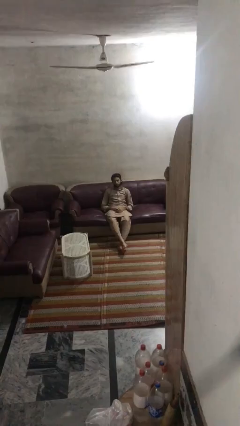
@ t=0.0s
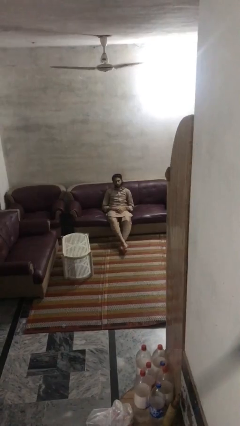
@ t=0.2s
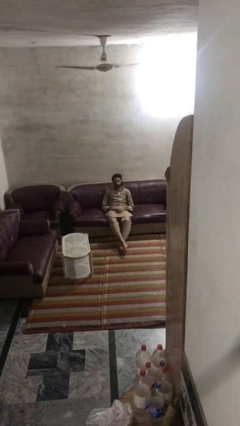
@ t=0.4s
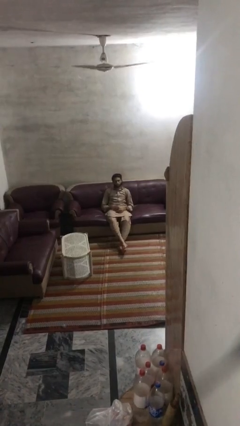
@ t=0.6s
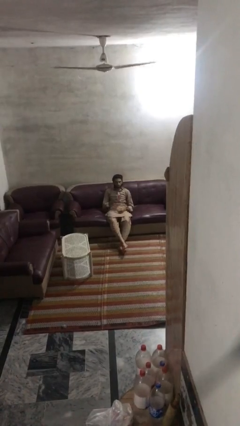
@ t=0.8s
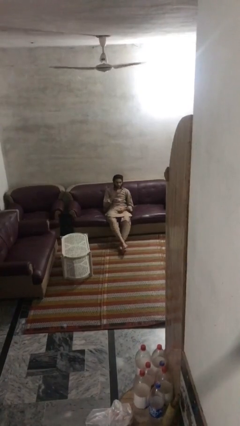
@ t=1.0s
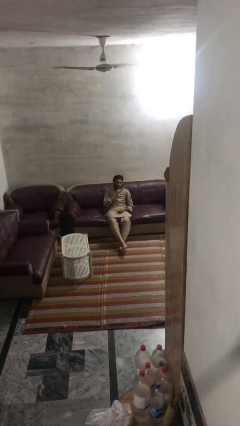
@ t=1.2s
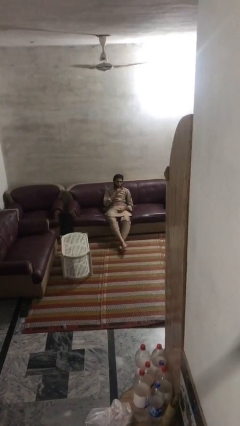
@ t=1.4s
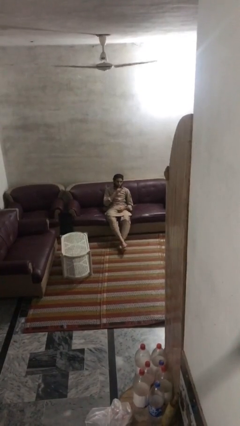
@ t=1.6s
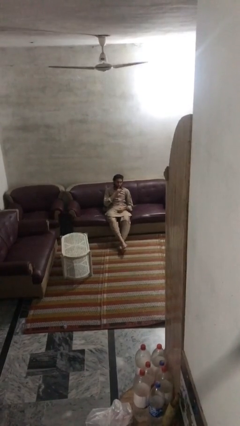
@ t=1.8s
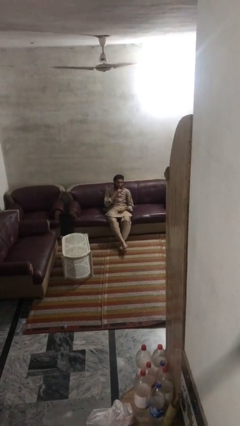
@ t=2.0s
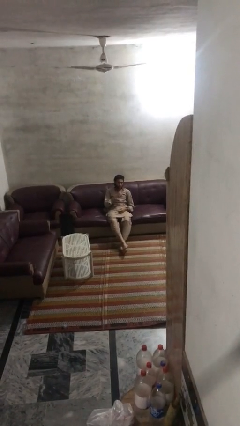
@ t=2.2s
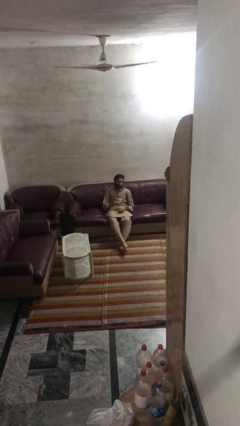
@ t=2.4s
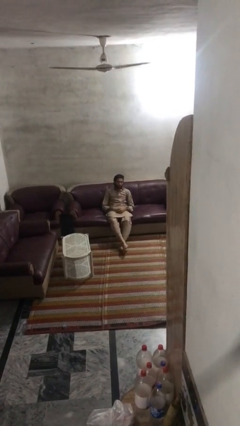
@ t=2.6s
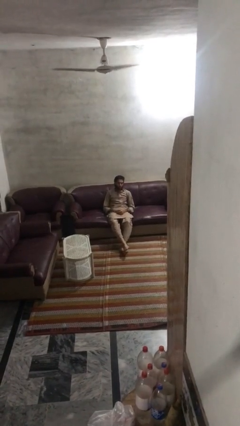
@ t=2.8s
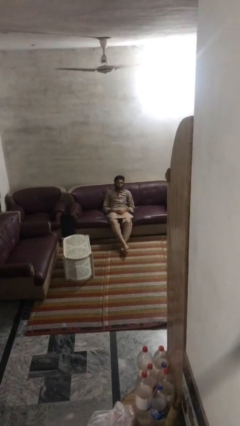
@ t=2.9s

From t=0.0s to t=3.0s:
person gestures be quiet

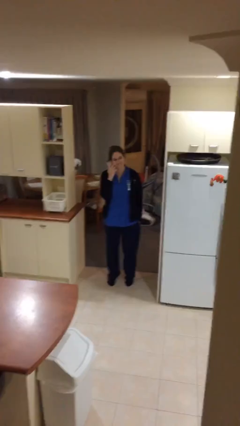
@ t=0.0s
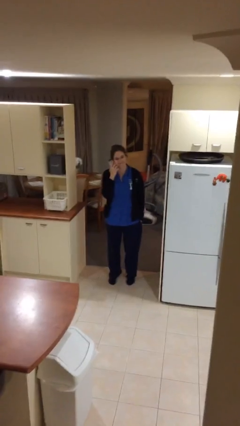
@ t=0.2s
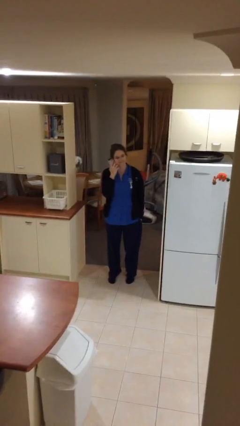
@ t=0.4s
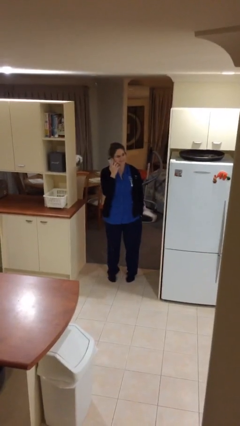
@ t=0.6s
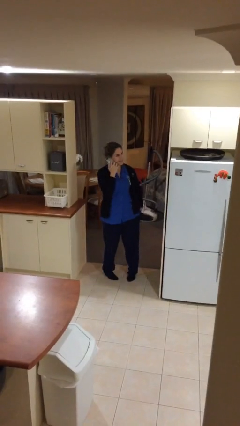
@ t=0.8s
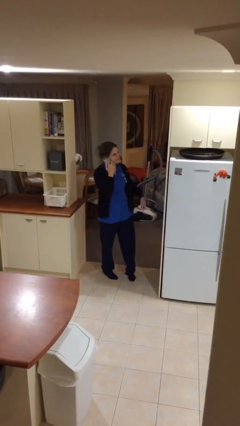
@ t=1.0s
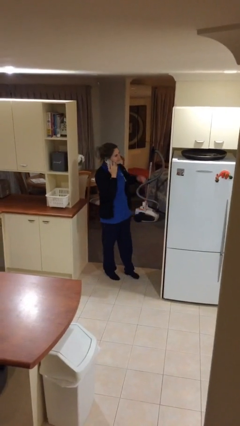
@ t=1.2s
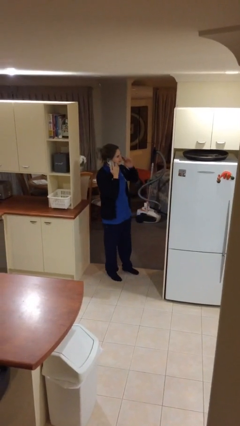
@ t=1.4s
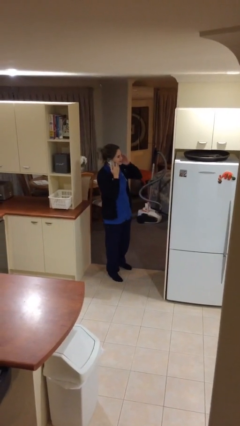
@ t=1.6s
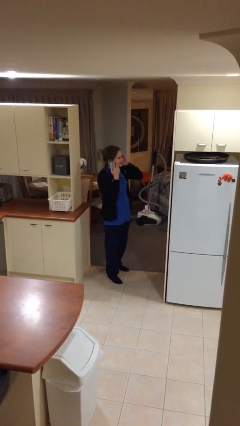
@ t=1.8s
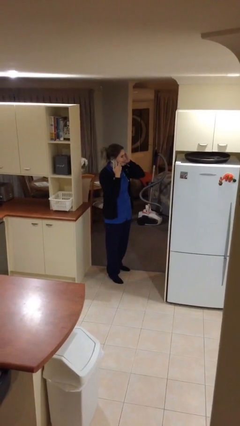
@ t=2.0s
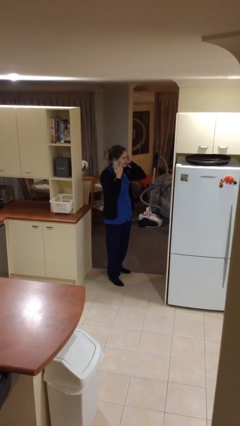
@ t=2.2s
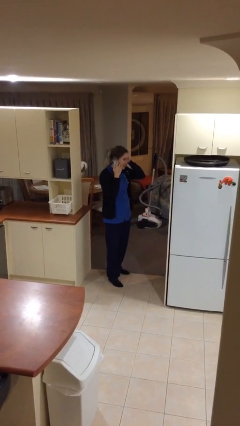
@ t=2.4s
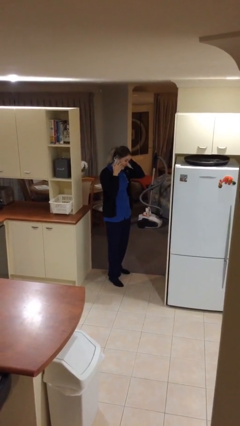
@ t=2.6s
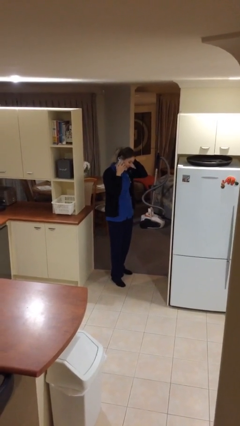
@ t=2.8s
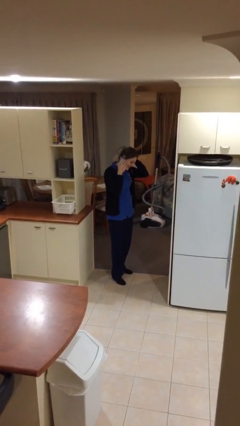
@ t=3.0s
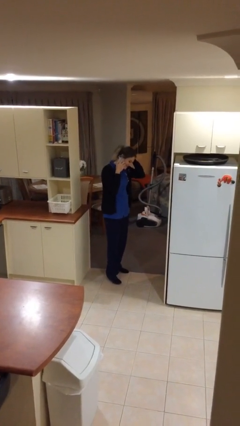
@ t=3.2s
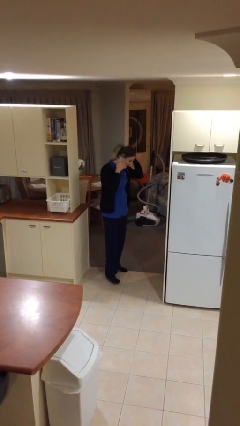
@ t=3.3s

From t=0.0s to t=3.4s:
person talks on phone

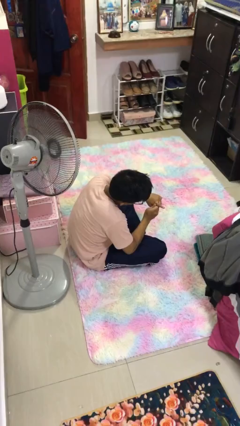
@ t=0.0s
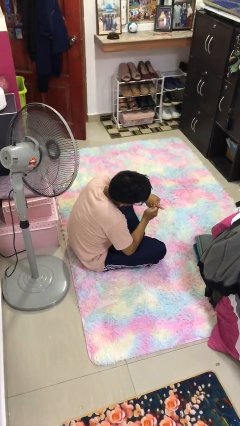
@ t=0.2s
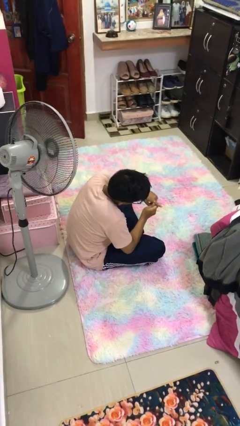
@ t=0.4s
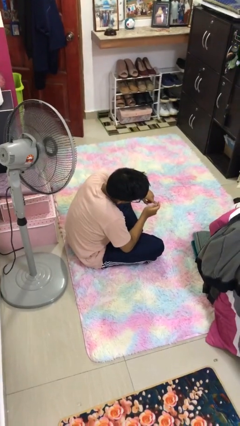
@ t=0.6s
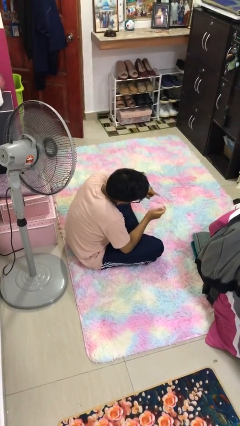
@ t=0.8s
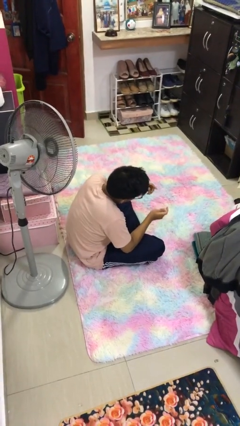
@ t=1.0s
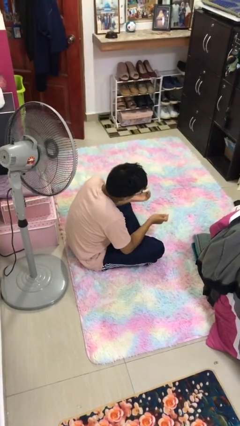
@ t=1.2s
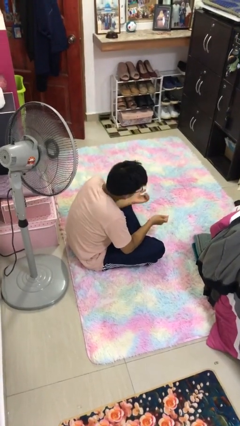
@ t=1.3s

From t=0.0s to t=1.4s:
person takes off ring

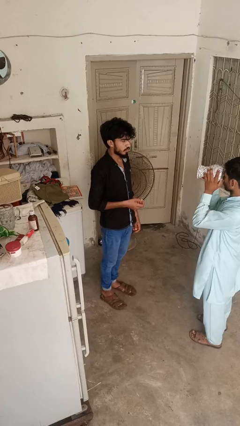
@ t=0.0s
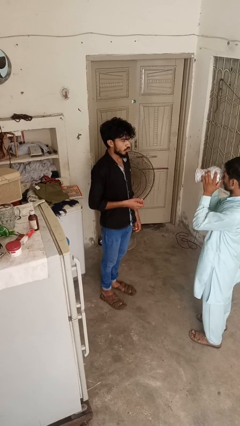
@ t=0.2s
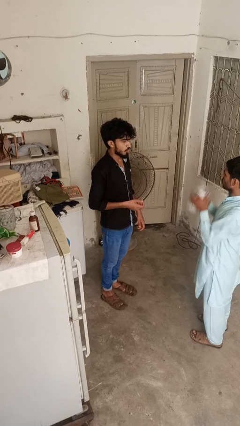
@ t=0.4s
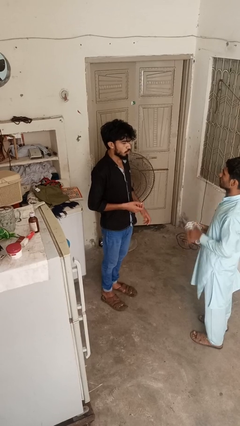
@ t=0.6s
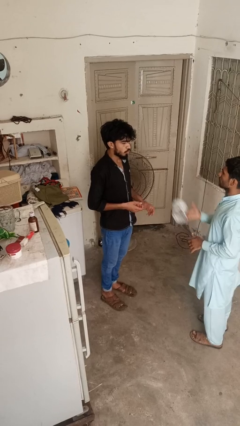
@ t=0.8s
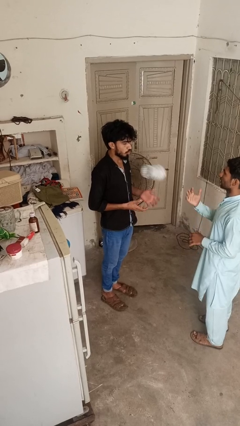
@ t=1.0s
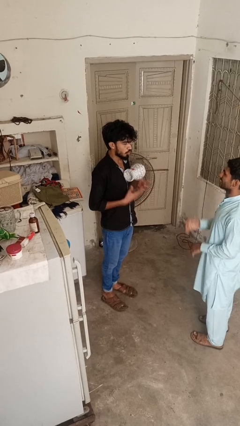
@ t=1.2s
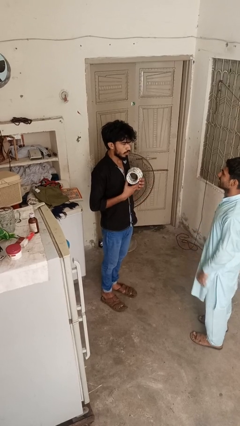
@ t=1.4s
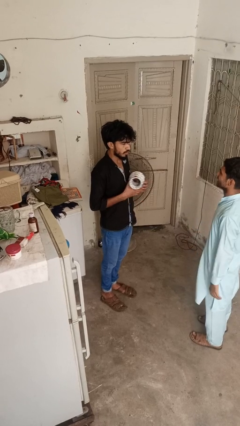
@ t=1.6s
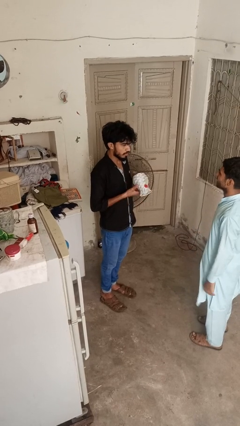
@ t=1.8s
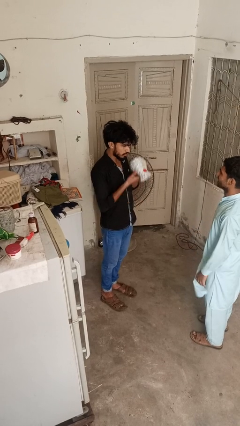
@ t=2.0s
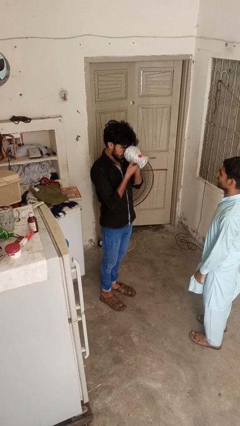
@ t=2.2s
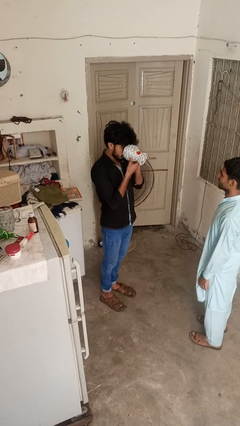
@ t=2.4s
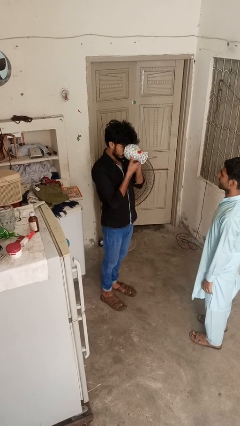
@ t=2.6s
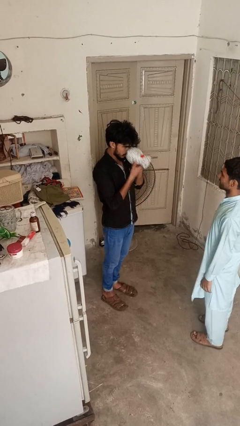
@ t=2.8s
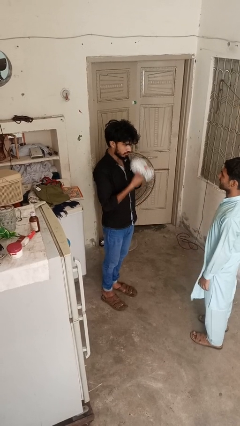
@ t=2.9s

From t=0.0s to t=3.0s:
person catches object from person

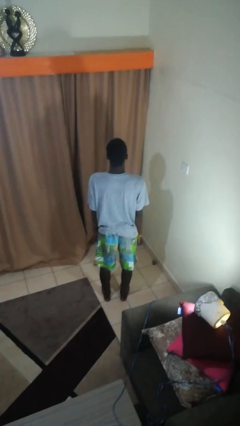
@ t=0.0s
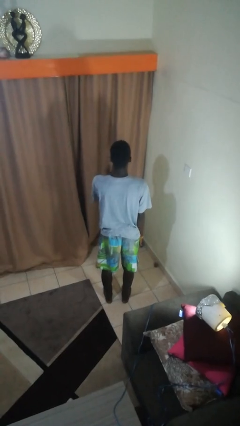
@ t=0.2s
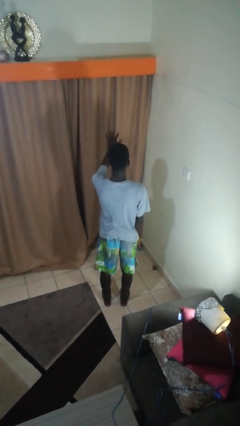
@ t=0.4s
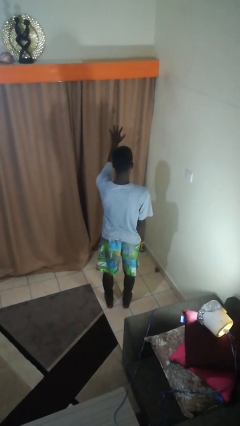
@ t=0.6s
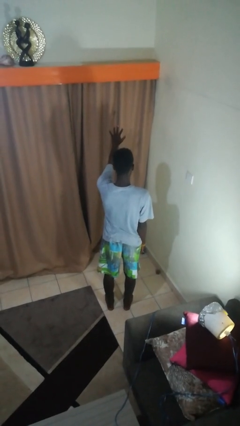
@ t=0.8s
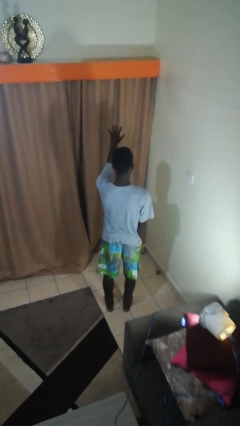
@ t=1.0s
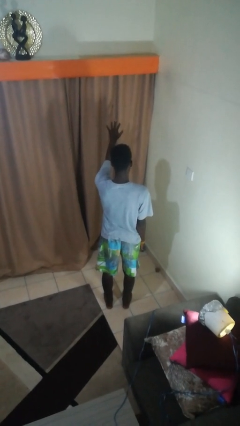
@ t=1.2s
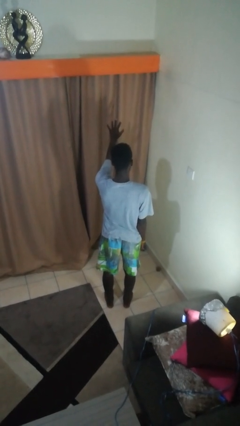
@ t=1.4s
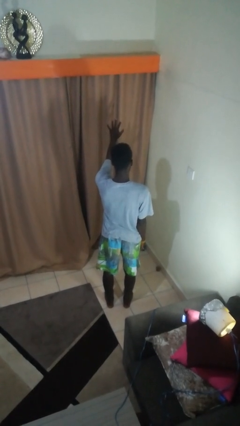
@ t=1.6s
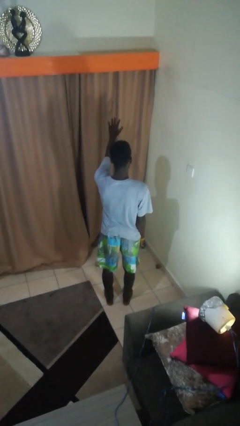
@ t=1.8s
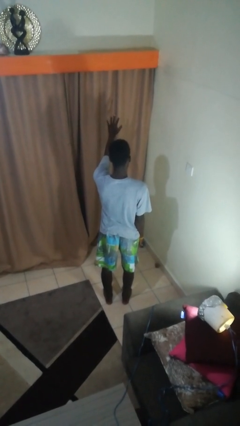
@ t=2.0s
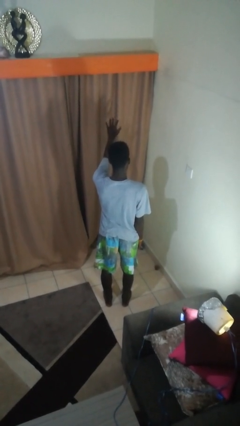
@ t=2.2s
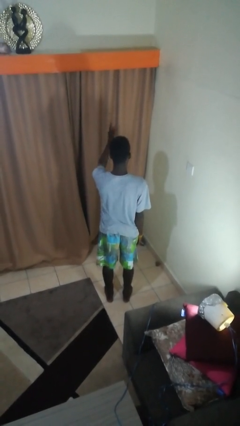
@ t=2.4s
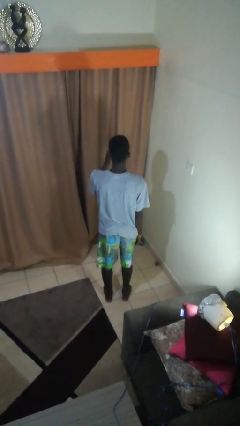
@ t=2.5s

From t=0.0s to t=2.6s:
person gestures number five

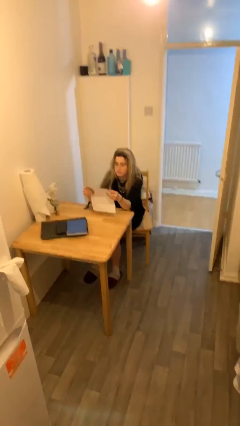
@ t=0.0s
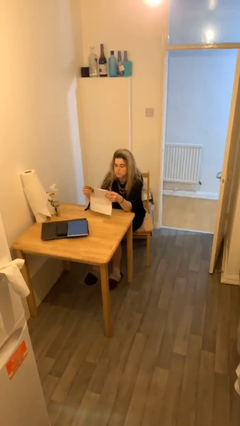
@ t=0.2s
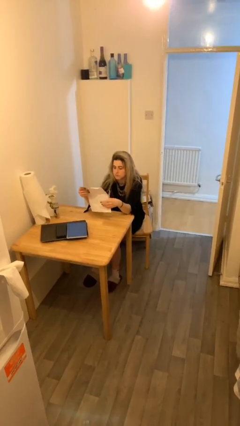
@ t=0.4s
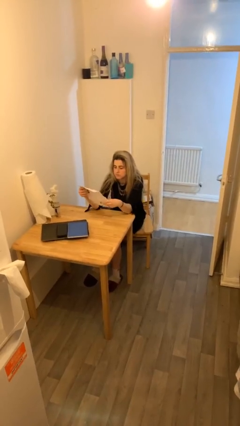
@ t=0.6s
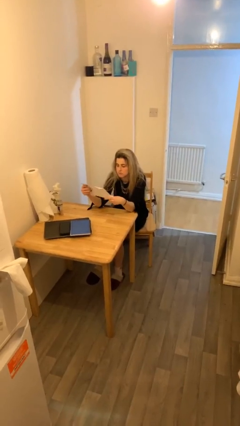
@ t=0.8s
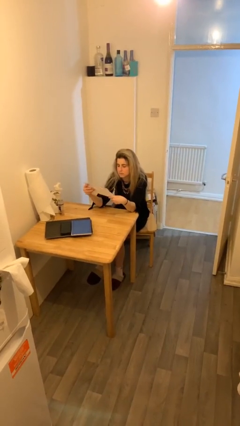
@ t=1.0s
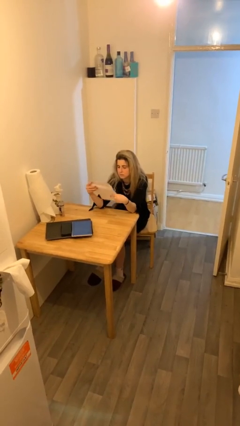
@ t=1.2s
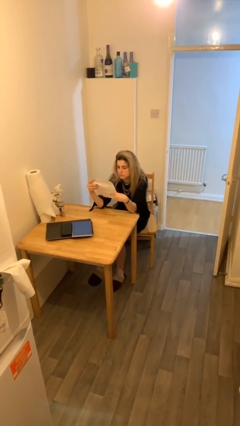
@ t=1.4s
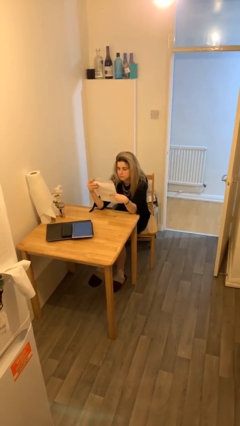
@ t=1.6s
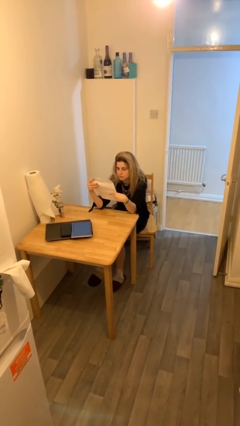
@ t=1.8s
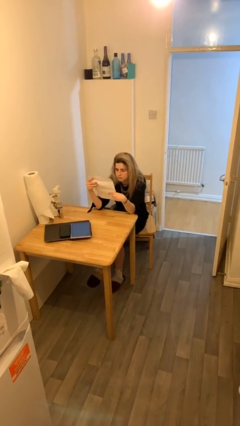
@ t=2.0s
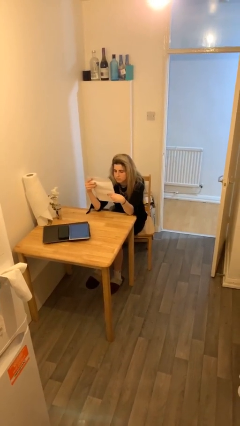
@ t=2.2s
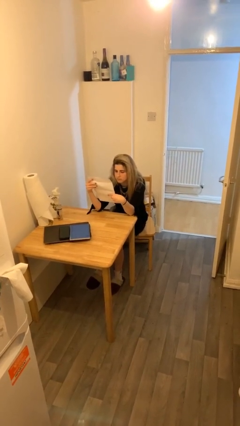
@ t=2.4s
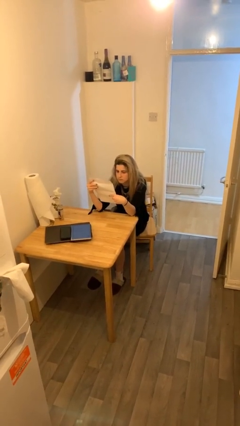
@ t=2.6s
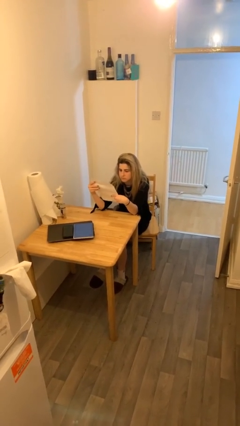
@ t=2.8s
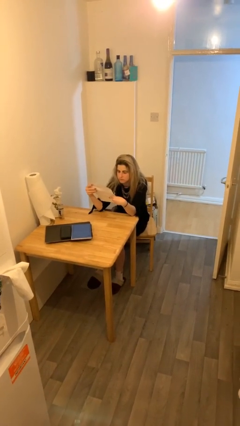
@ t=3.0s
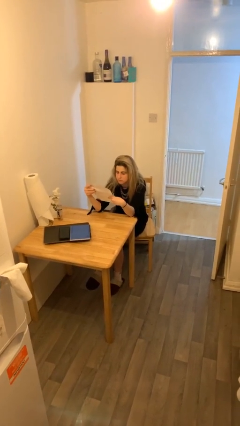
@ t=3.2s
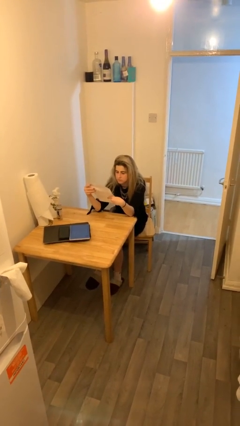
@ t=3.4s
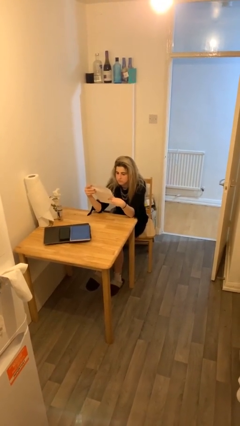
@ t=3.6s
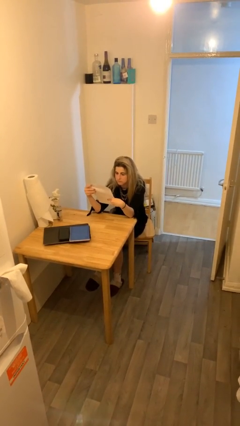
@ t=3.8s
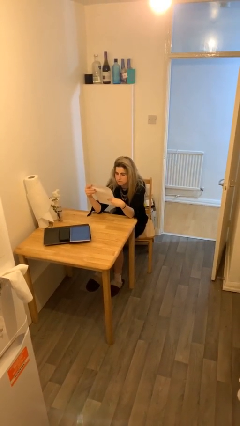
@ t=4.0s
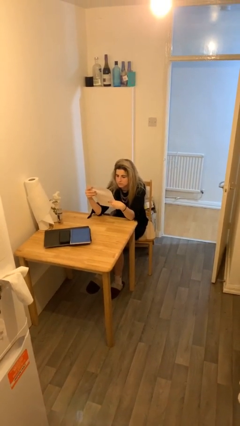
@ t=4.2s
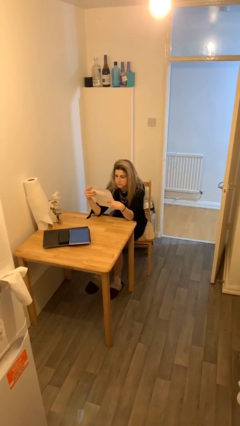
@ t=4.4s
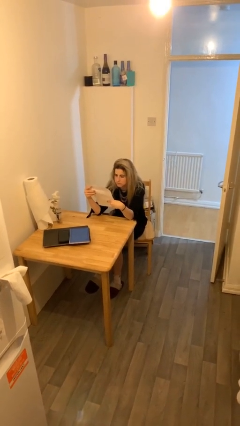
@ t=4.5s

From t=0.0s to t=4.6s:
person reads document
